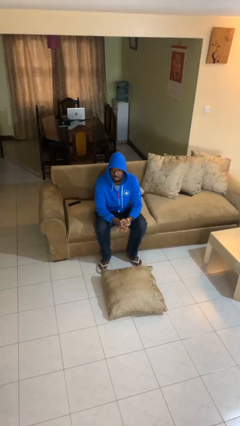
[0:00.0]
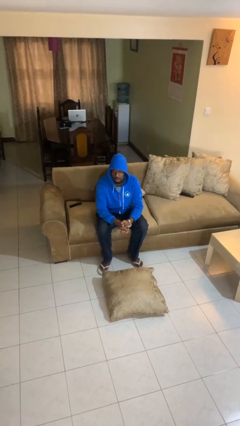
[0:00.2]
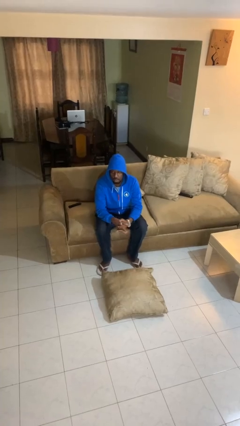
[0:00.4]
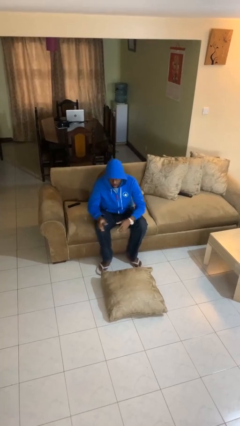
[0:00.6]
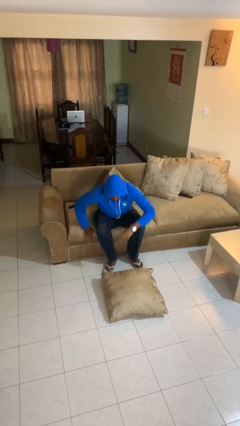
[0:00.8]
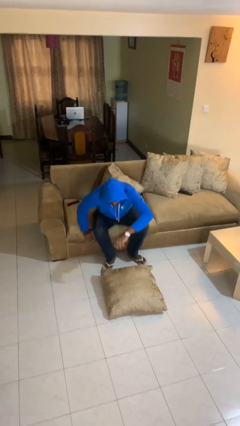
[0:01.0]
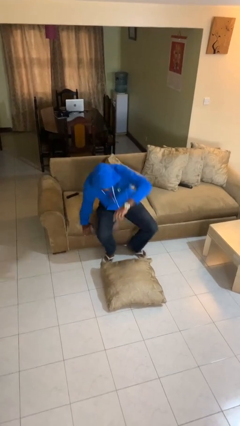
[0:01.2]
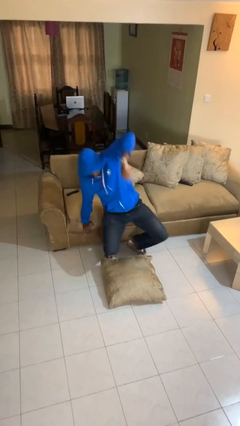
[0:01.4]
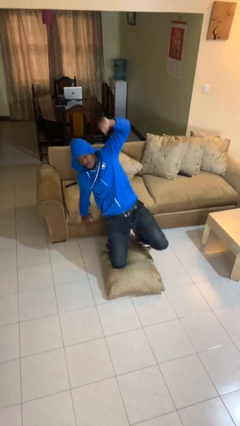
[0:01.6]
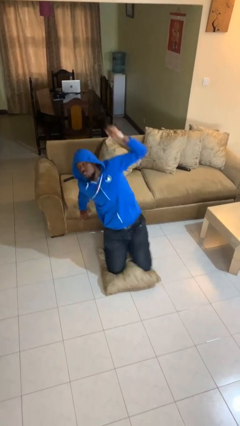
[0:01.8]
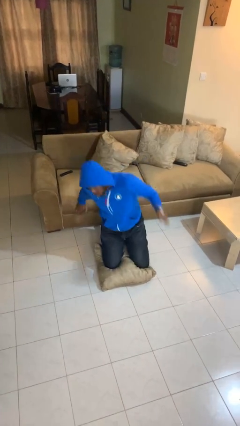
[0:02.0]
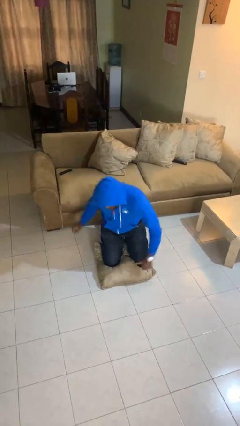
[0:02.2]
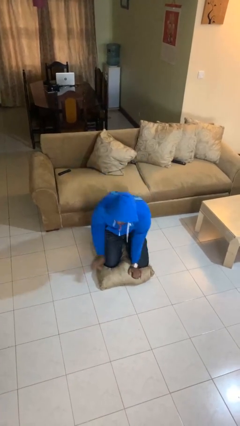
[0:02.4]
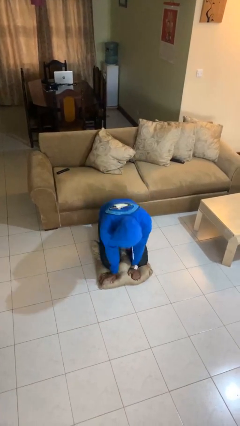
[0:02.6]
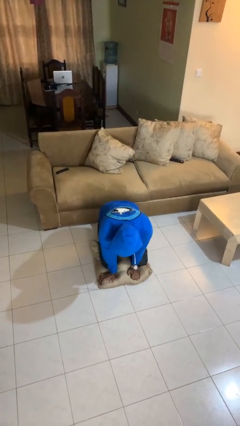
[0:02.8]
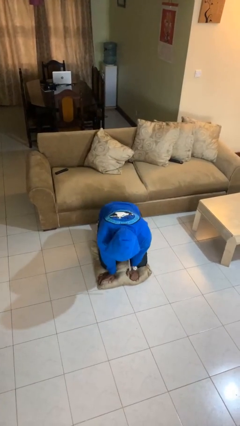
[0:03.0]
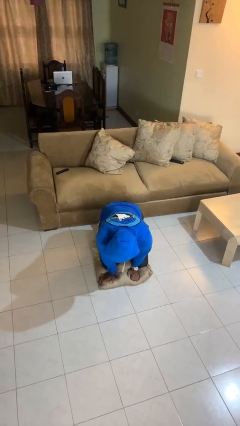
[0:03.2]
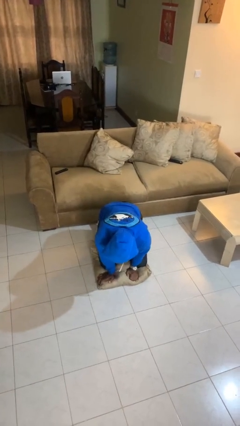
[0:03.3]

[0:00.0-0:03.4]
person falls from chair

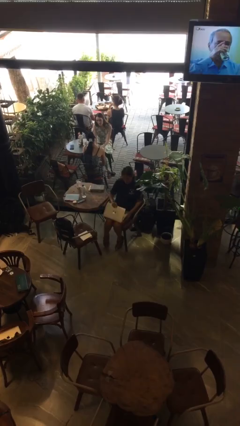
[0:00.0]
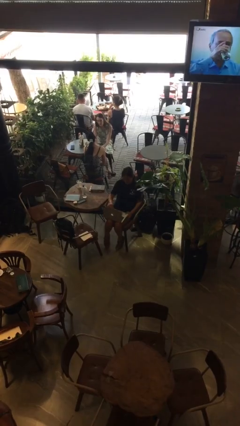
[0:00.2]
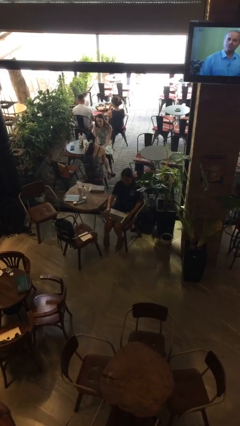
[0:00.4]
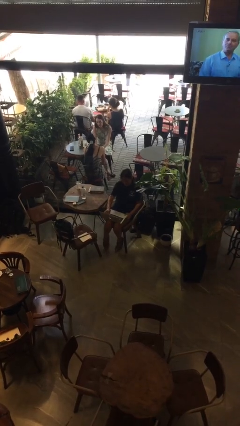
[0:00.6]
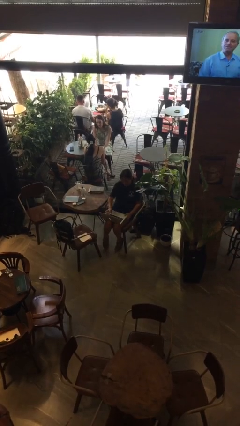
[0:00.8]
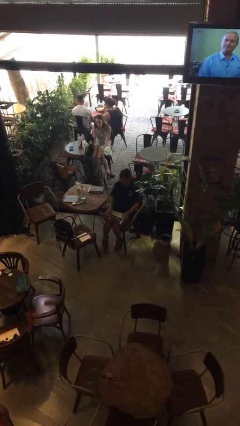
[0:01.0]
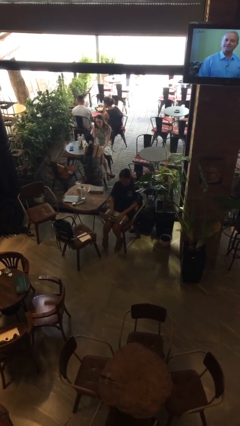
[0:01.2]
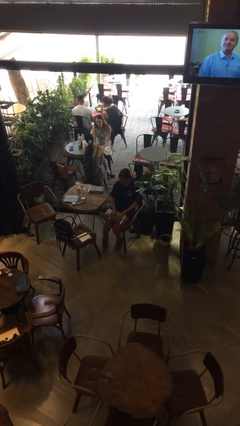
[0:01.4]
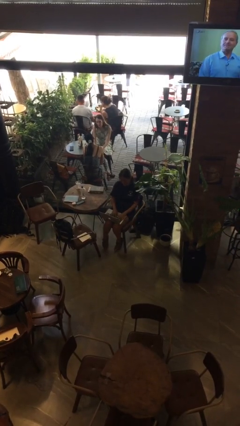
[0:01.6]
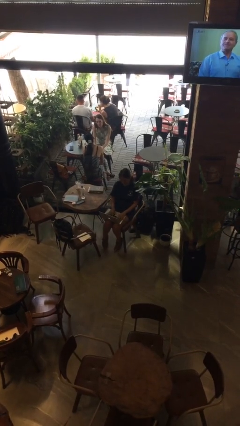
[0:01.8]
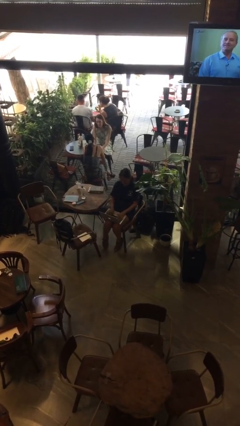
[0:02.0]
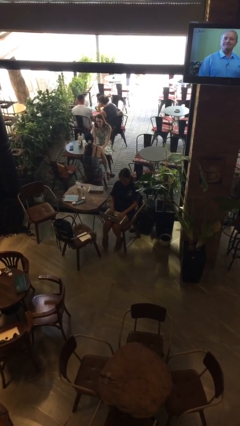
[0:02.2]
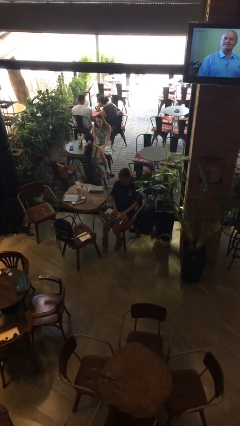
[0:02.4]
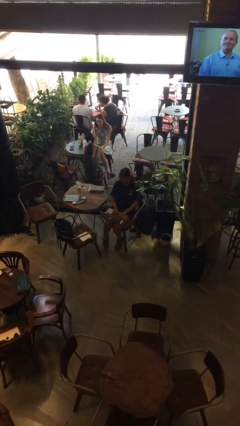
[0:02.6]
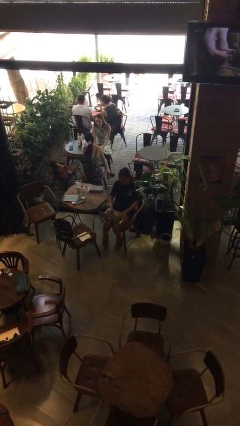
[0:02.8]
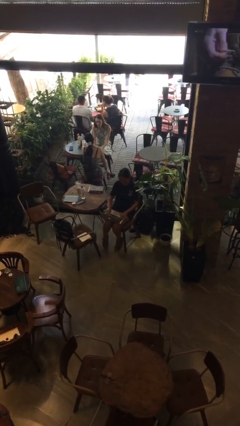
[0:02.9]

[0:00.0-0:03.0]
person opens laptop

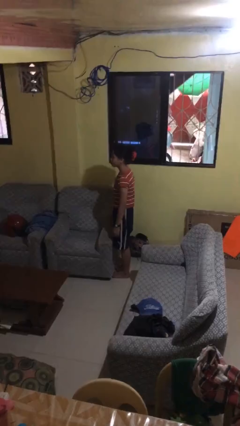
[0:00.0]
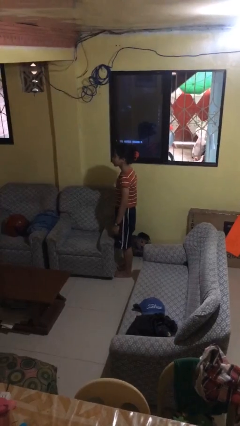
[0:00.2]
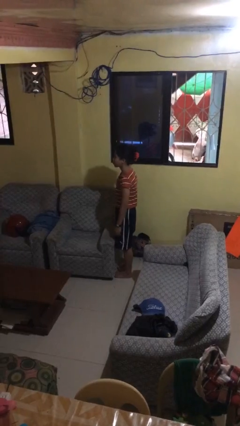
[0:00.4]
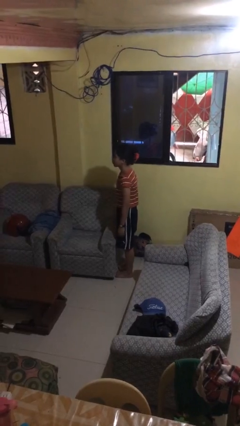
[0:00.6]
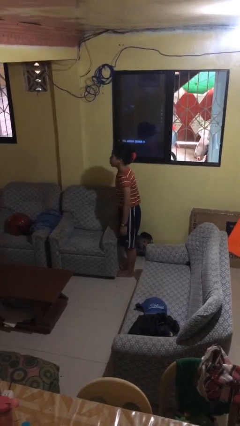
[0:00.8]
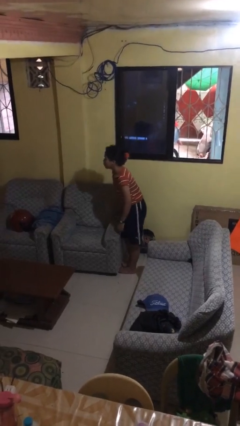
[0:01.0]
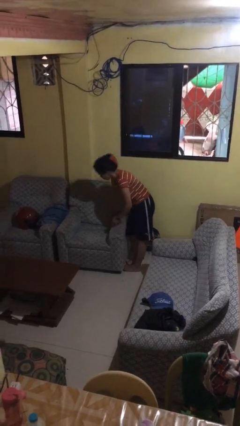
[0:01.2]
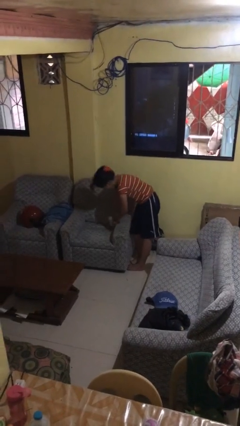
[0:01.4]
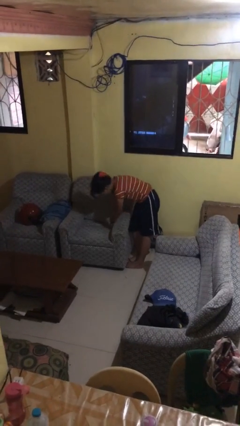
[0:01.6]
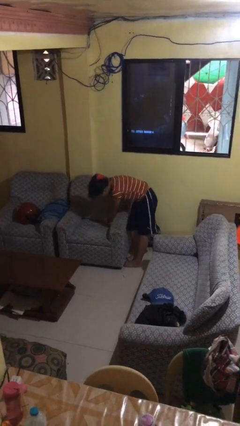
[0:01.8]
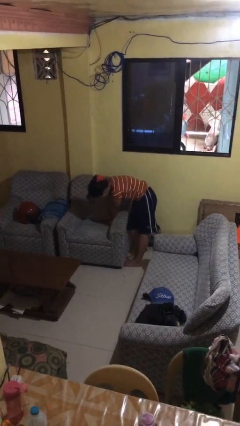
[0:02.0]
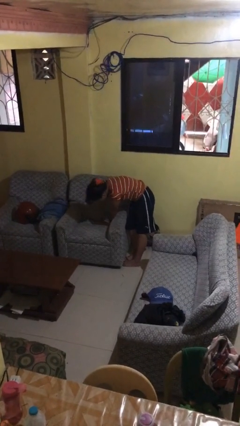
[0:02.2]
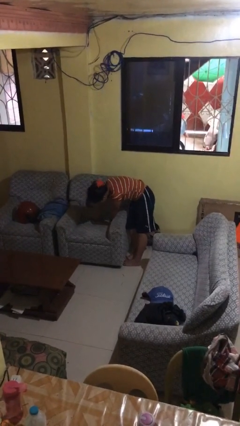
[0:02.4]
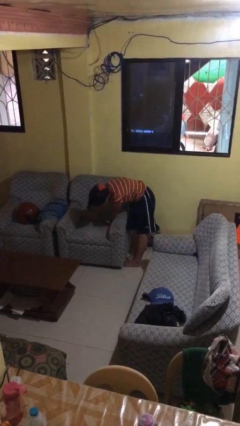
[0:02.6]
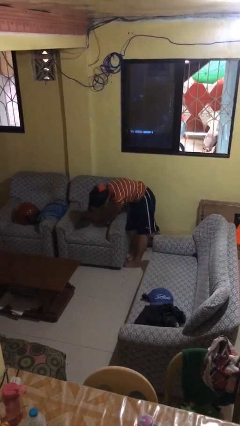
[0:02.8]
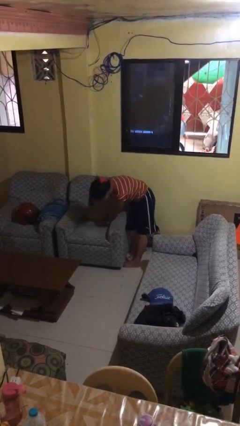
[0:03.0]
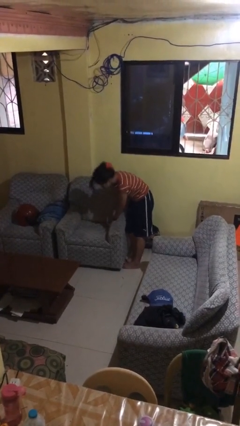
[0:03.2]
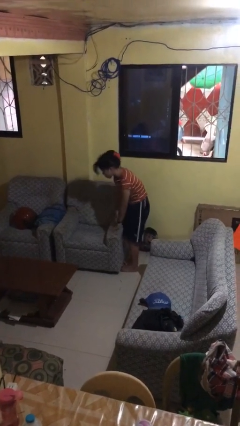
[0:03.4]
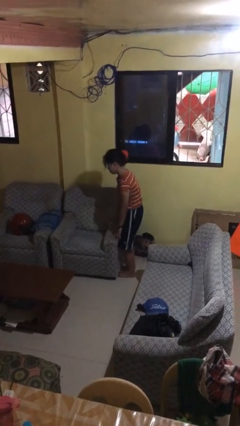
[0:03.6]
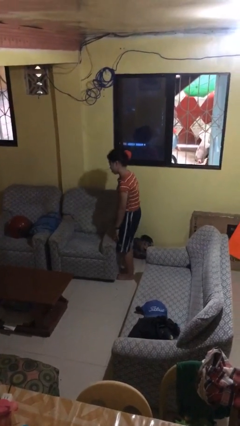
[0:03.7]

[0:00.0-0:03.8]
person searches in couch

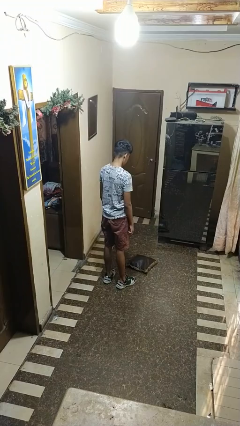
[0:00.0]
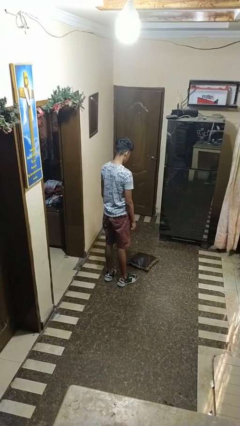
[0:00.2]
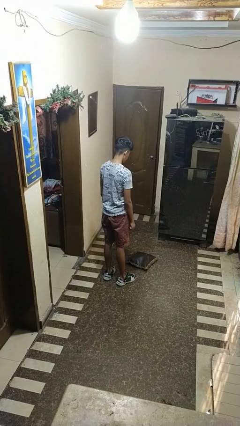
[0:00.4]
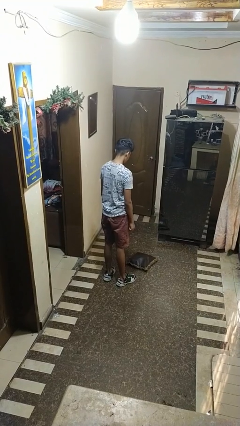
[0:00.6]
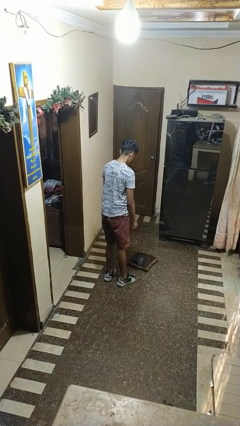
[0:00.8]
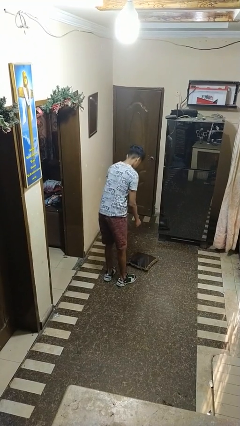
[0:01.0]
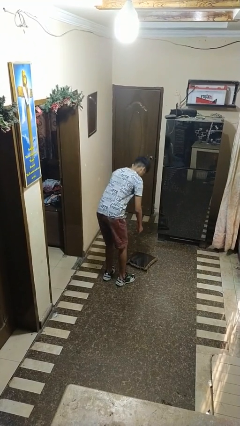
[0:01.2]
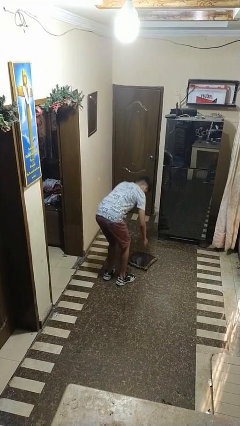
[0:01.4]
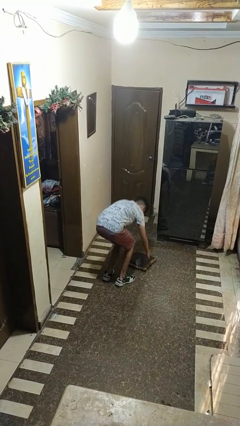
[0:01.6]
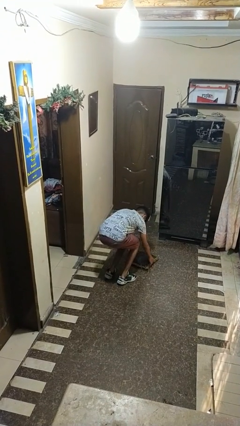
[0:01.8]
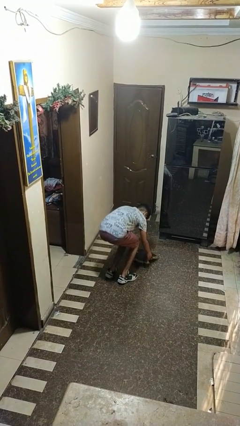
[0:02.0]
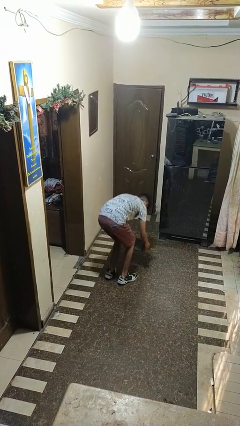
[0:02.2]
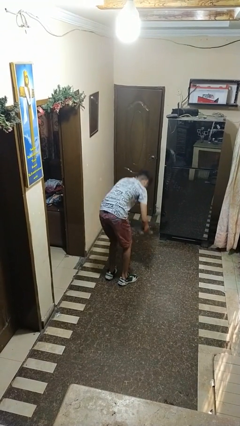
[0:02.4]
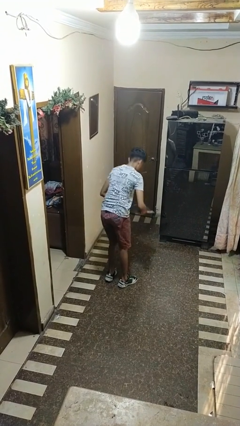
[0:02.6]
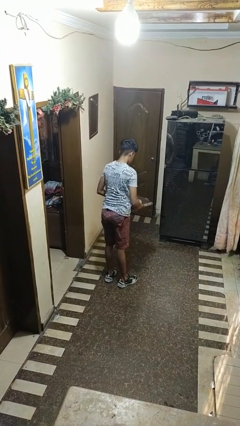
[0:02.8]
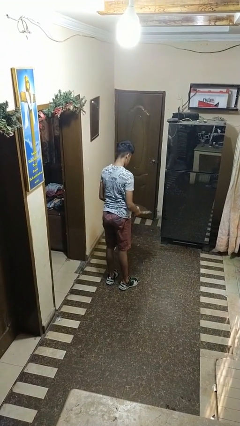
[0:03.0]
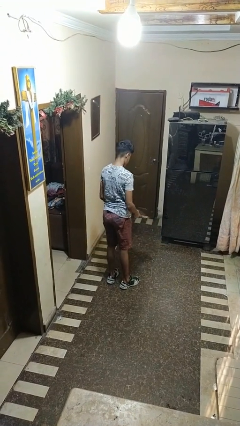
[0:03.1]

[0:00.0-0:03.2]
person picks up object from floor

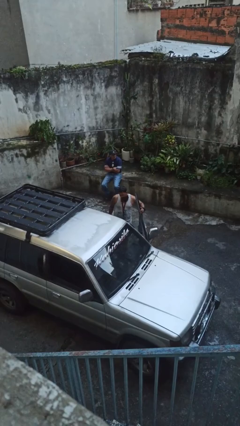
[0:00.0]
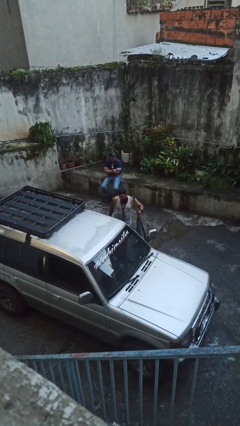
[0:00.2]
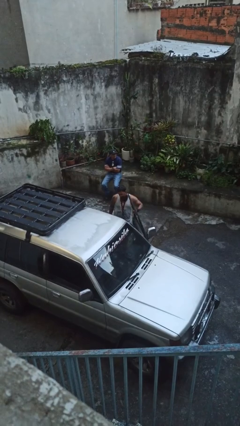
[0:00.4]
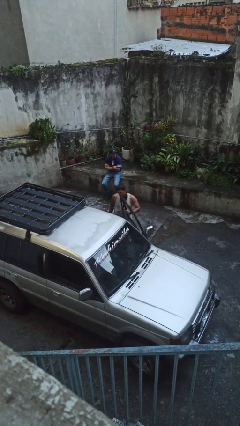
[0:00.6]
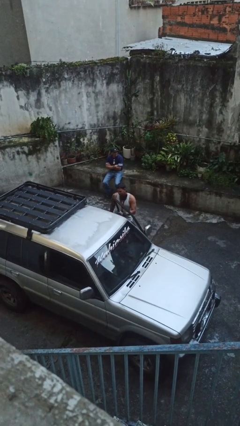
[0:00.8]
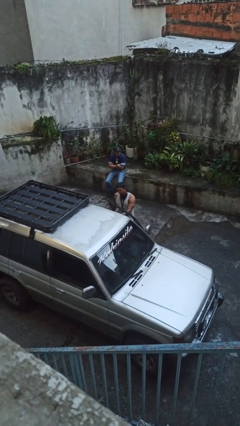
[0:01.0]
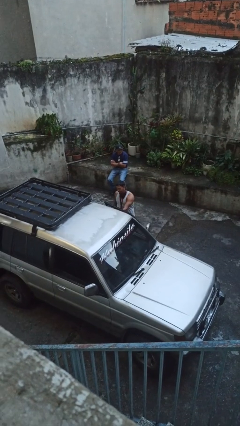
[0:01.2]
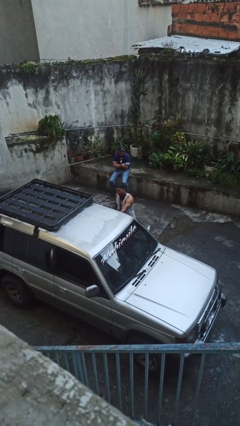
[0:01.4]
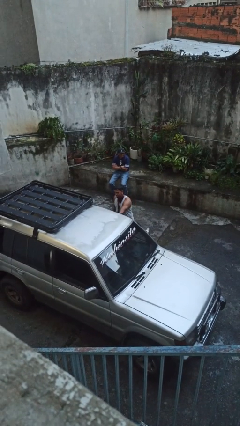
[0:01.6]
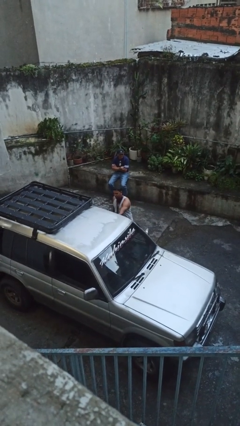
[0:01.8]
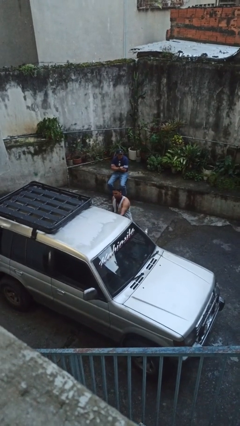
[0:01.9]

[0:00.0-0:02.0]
person closes car door

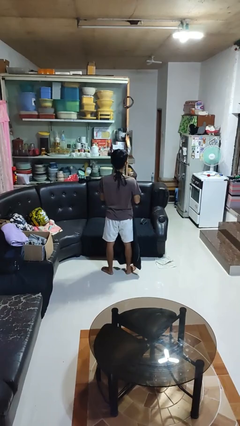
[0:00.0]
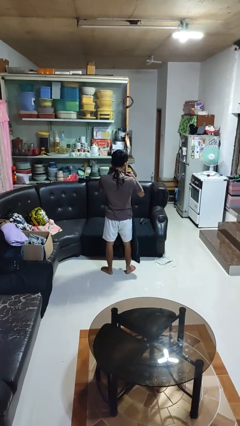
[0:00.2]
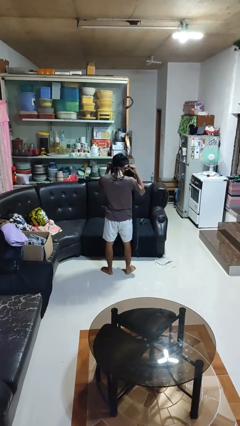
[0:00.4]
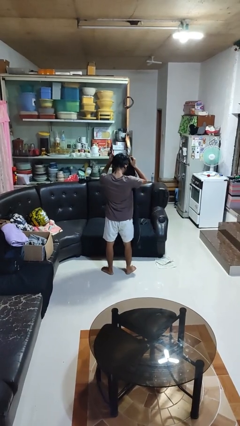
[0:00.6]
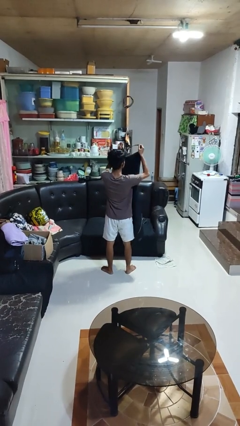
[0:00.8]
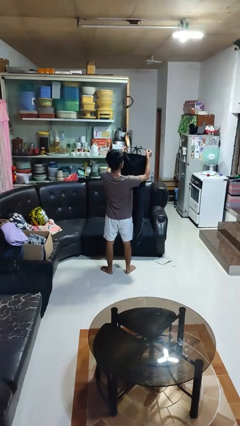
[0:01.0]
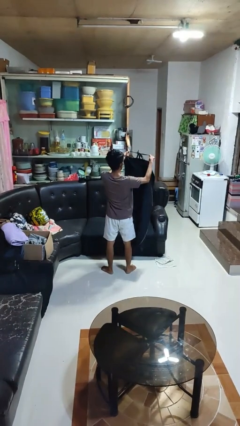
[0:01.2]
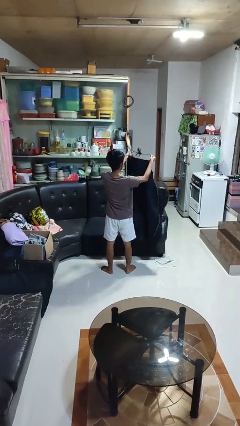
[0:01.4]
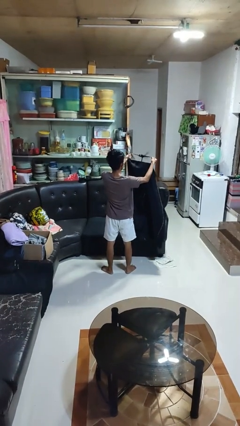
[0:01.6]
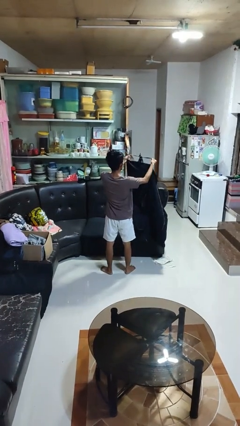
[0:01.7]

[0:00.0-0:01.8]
person takes off apron

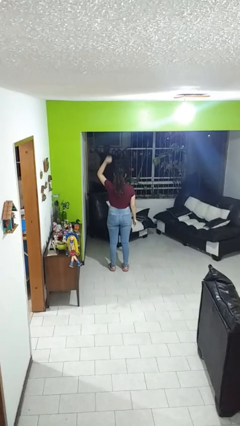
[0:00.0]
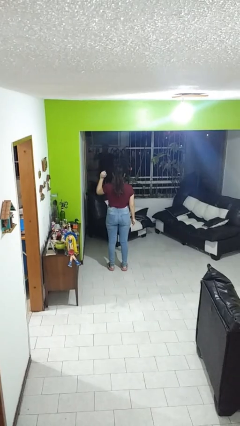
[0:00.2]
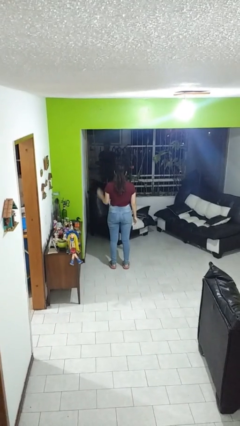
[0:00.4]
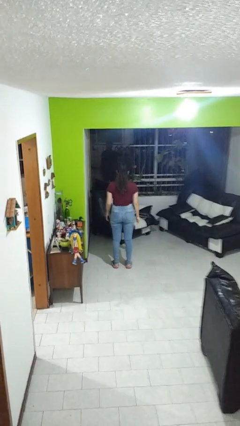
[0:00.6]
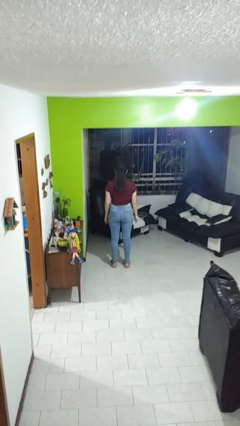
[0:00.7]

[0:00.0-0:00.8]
person gestures lower hand
